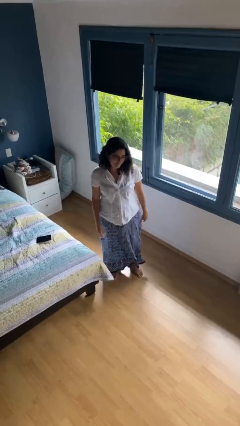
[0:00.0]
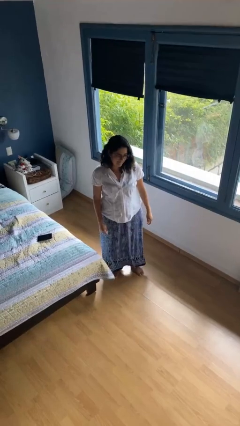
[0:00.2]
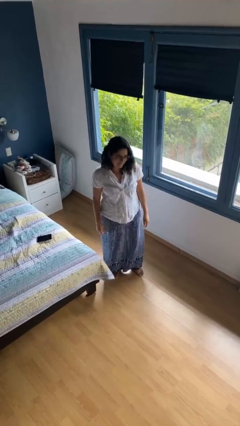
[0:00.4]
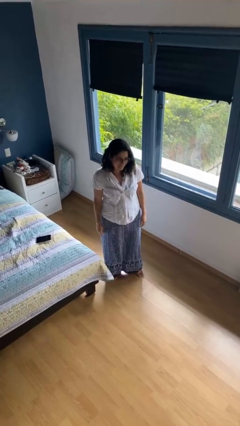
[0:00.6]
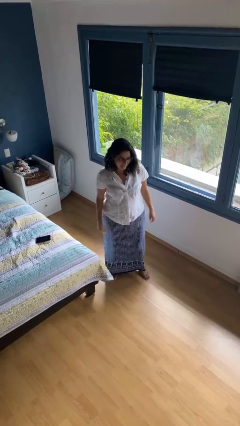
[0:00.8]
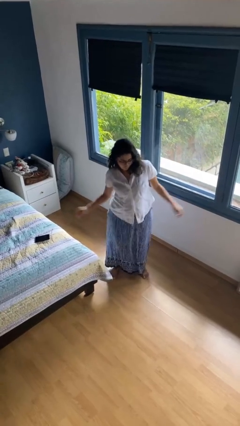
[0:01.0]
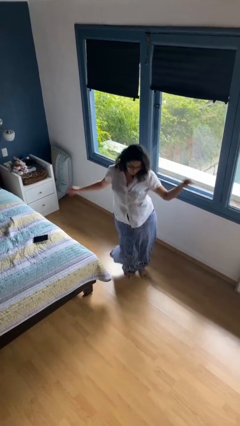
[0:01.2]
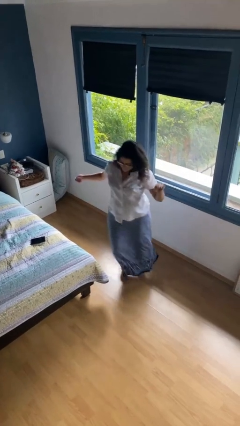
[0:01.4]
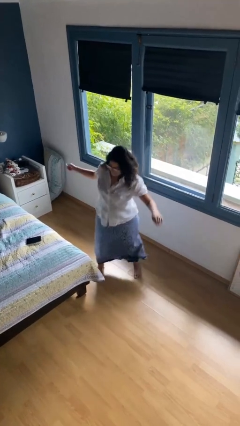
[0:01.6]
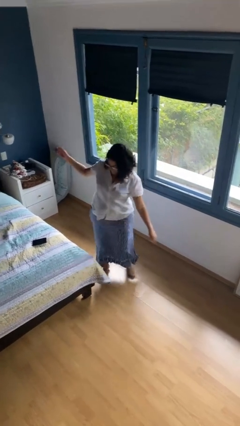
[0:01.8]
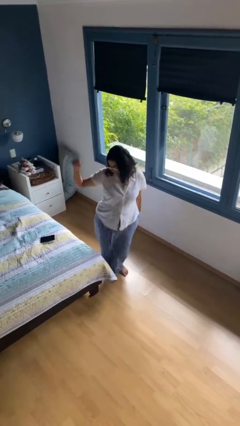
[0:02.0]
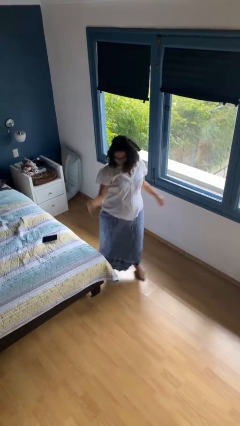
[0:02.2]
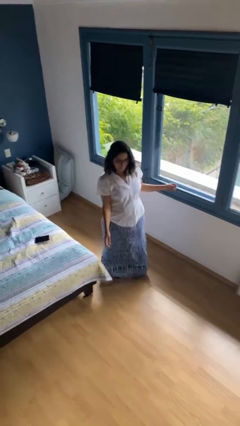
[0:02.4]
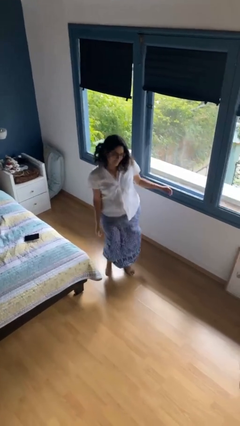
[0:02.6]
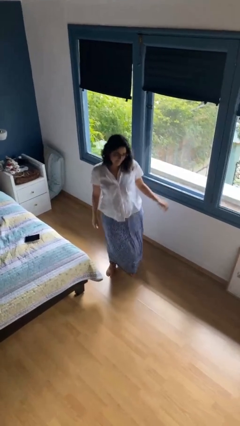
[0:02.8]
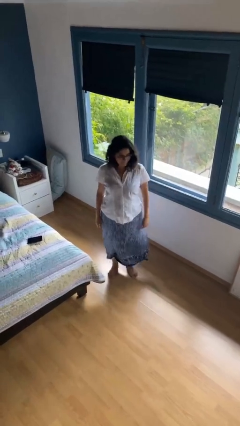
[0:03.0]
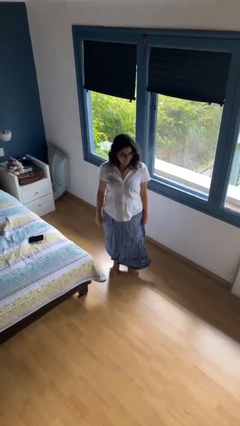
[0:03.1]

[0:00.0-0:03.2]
person dances in place

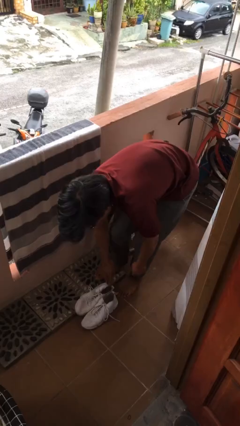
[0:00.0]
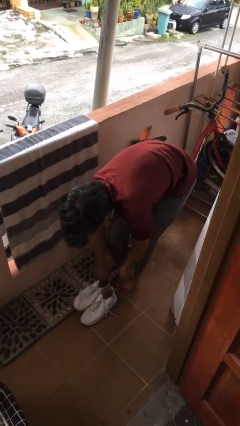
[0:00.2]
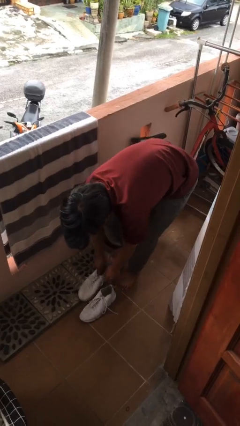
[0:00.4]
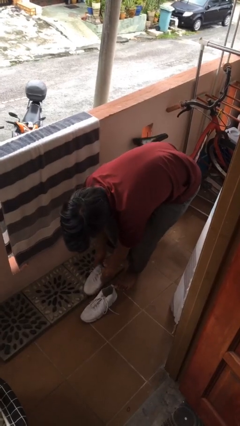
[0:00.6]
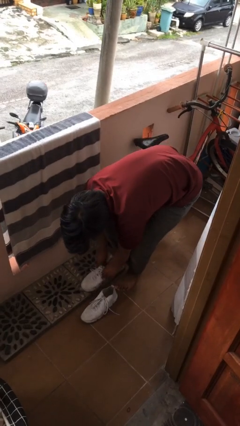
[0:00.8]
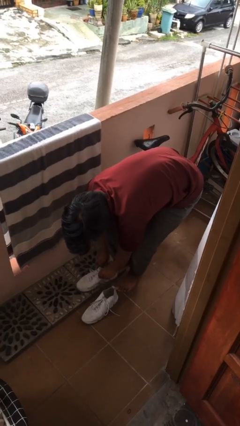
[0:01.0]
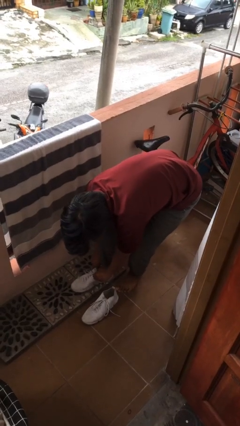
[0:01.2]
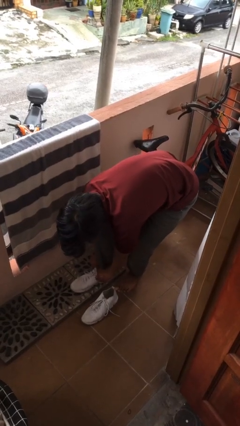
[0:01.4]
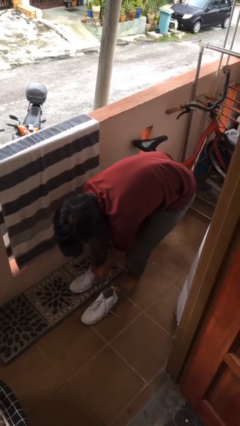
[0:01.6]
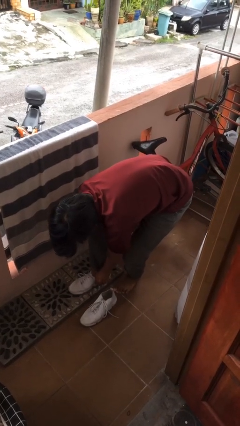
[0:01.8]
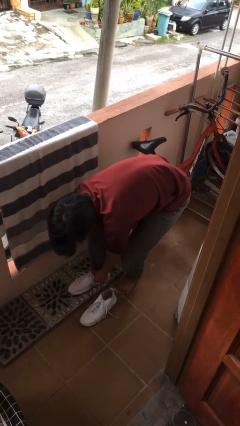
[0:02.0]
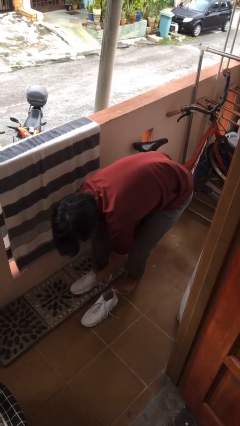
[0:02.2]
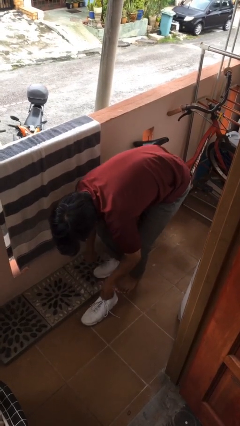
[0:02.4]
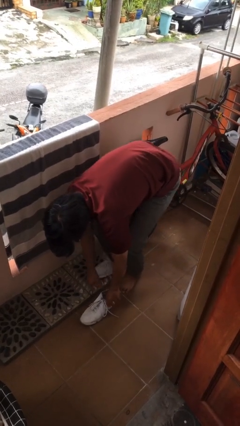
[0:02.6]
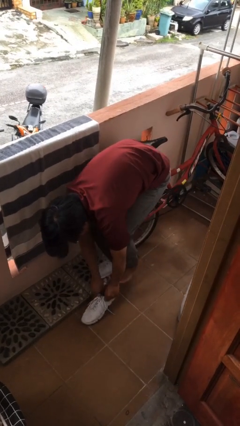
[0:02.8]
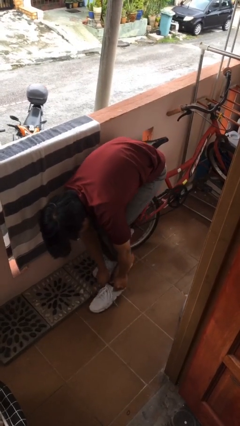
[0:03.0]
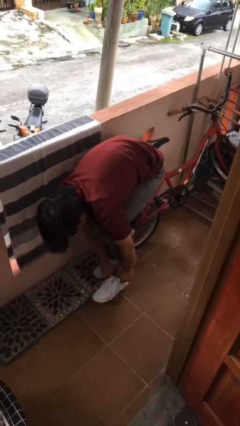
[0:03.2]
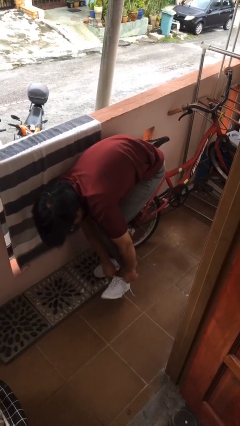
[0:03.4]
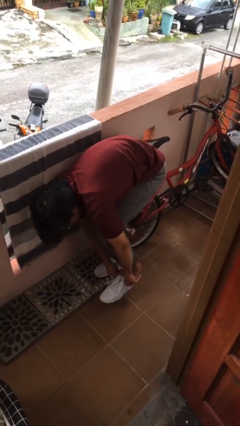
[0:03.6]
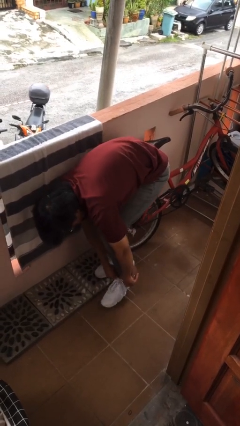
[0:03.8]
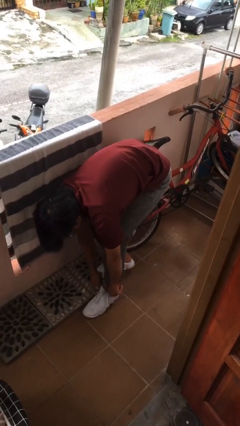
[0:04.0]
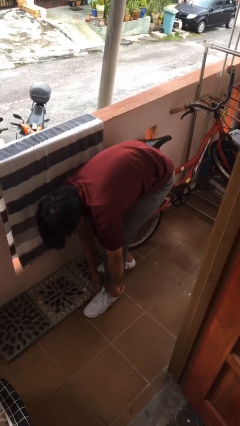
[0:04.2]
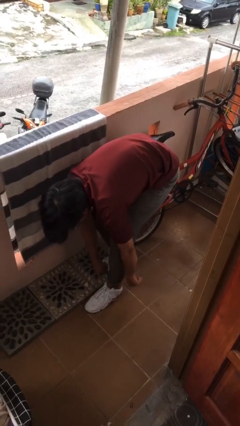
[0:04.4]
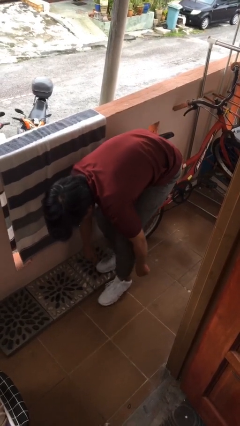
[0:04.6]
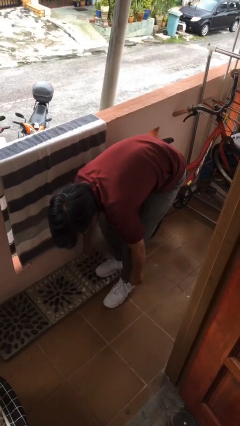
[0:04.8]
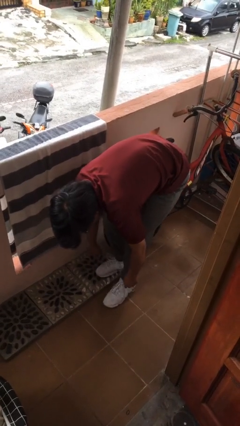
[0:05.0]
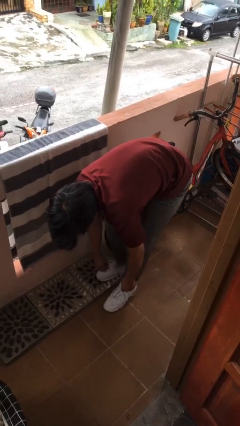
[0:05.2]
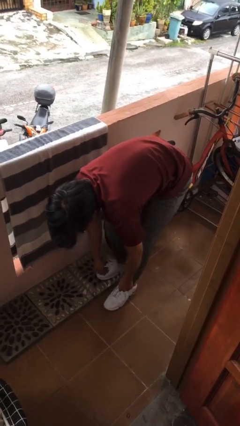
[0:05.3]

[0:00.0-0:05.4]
person puts on shoes

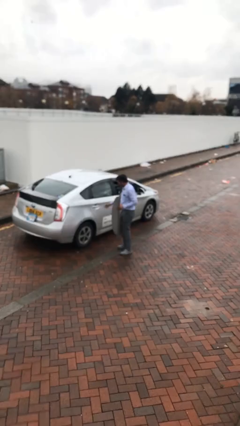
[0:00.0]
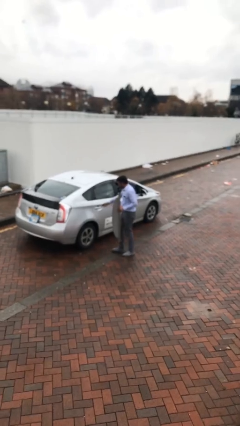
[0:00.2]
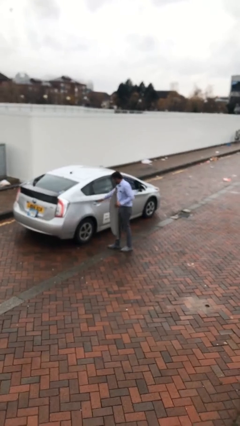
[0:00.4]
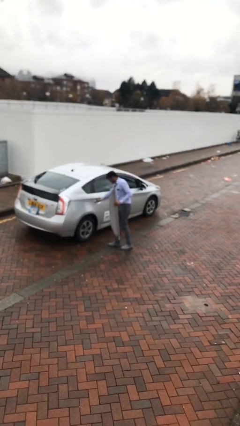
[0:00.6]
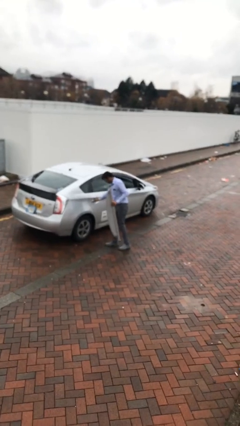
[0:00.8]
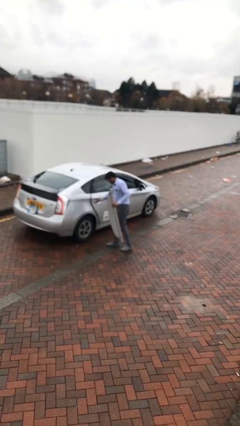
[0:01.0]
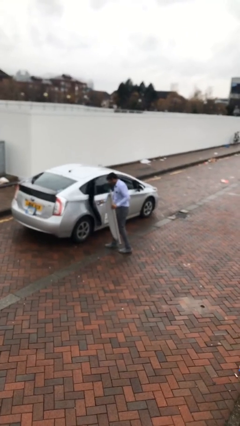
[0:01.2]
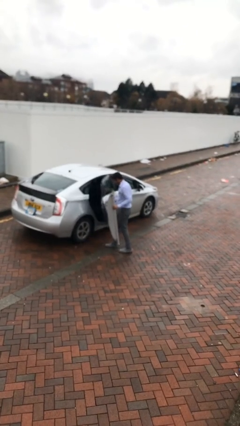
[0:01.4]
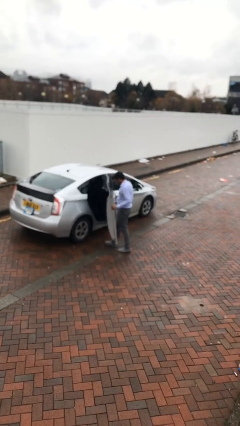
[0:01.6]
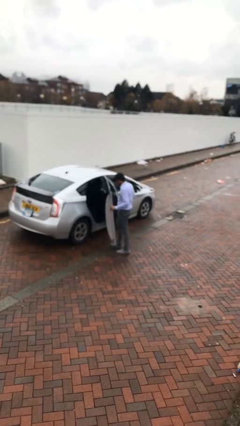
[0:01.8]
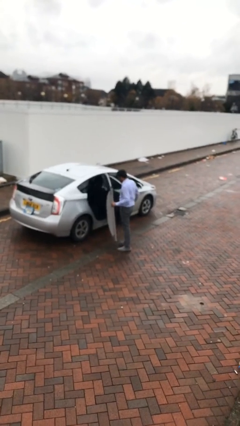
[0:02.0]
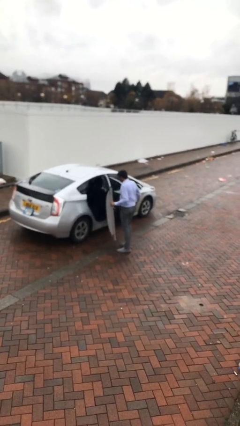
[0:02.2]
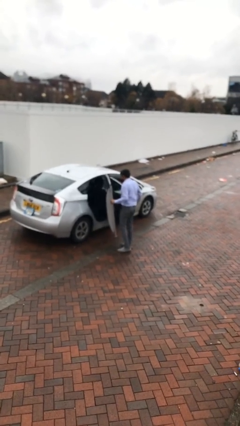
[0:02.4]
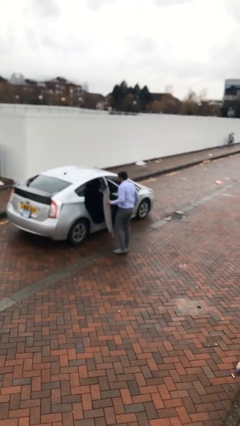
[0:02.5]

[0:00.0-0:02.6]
person opens car door

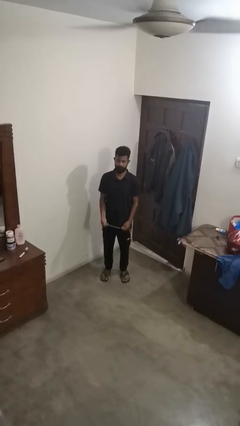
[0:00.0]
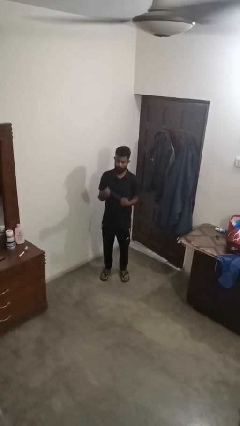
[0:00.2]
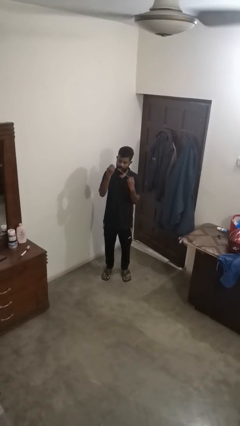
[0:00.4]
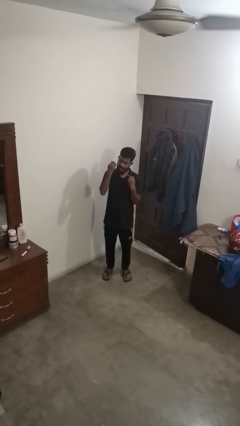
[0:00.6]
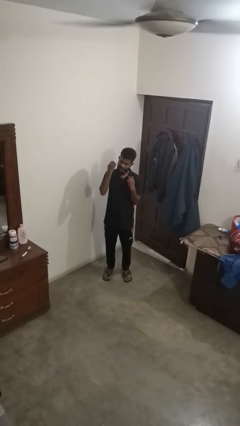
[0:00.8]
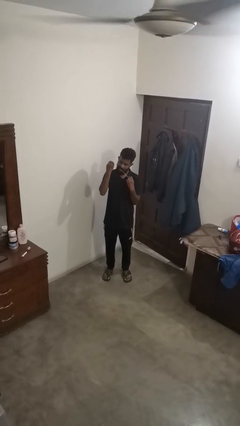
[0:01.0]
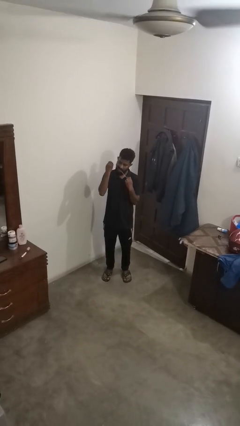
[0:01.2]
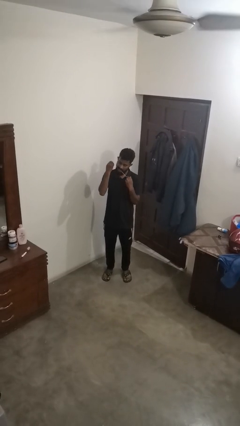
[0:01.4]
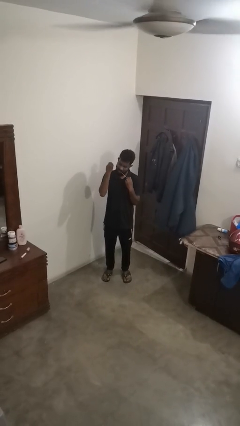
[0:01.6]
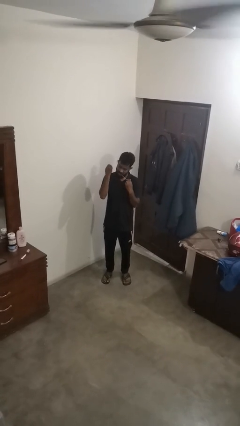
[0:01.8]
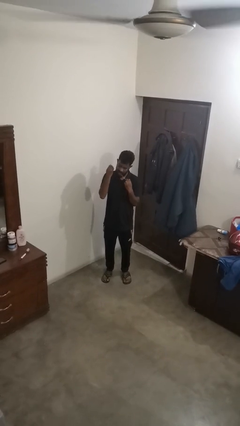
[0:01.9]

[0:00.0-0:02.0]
person flosses

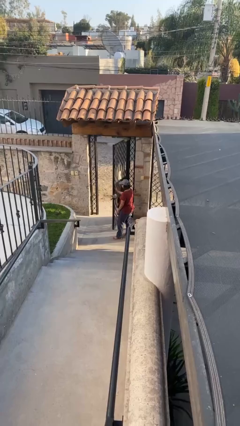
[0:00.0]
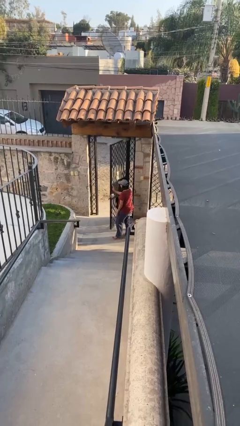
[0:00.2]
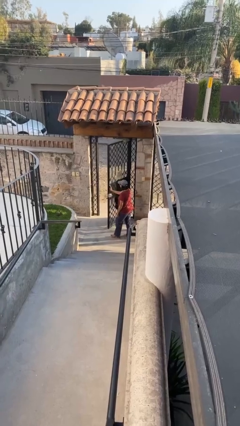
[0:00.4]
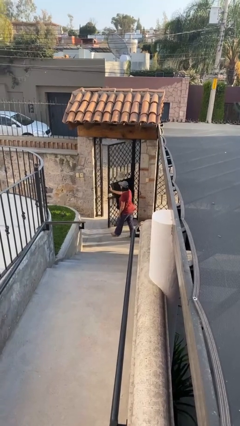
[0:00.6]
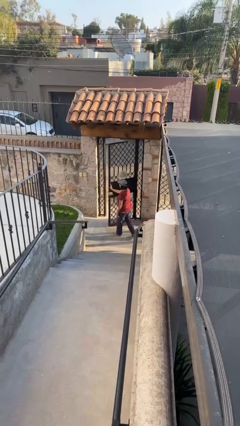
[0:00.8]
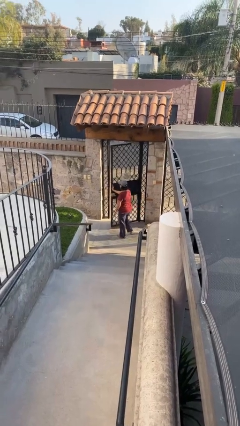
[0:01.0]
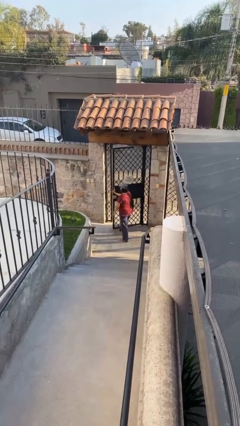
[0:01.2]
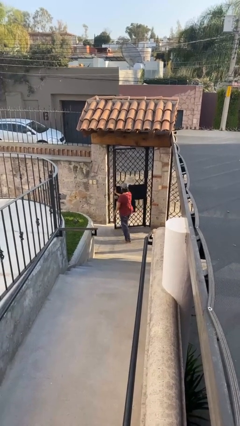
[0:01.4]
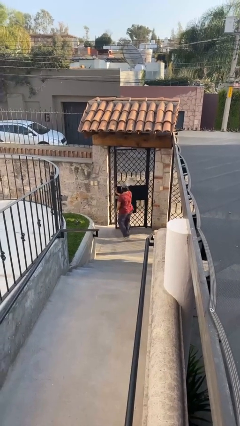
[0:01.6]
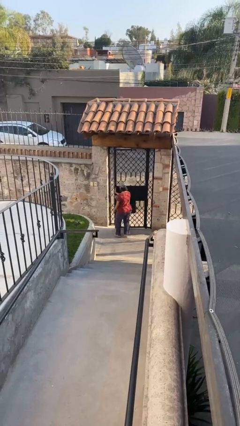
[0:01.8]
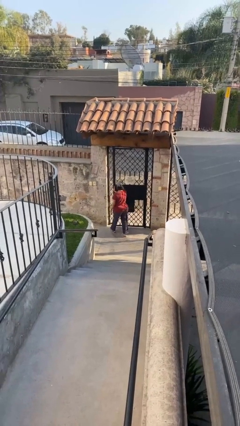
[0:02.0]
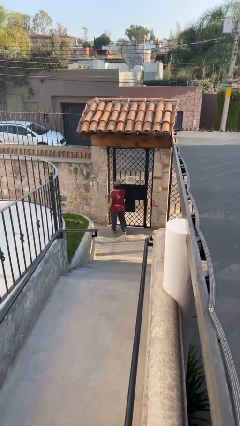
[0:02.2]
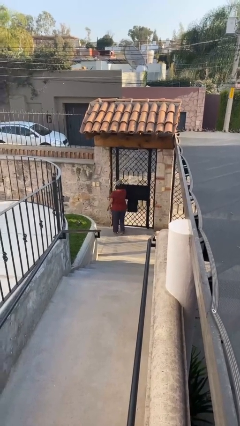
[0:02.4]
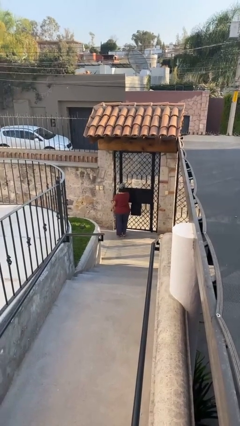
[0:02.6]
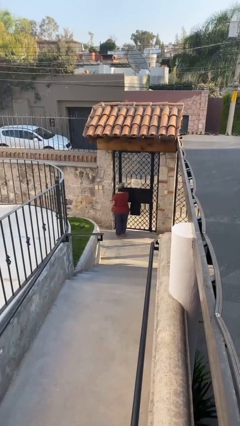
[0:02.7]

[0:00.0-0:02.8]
person closes facility door

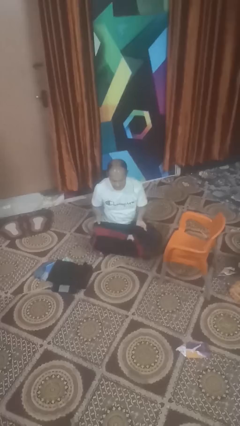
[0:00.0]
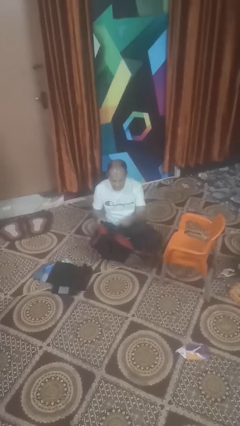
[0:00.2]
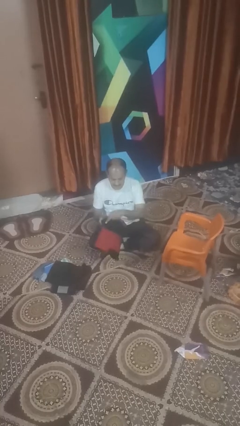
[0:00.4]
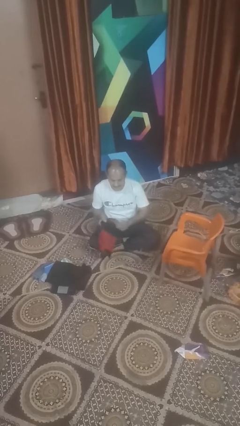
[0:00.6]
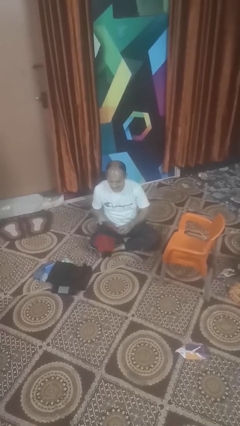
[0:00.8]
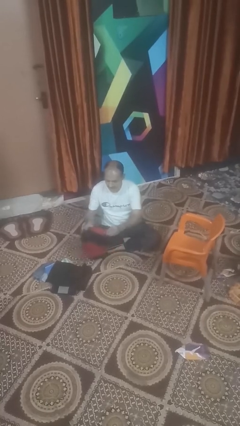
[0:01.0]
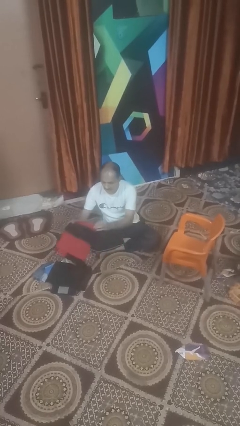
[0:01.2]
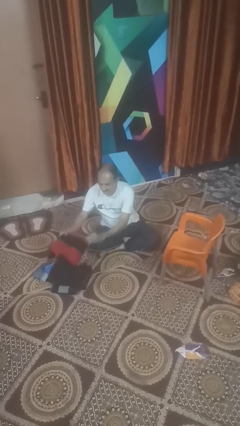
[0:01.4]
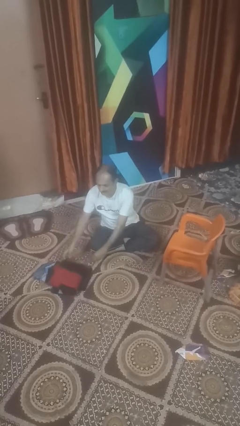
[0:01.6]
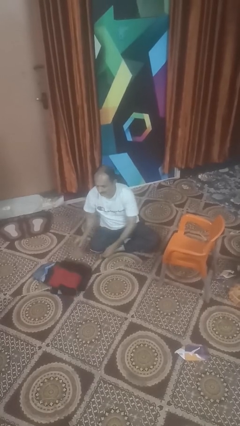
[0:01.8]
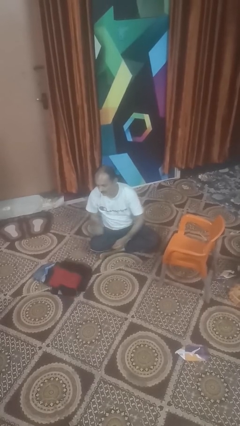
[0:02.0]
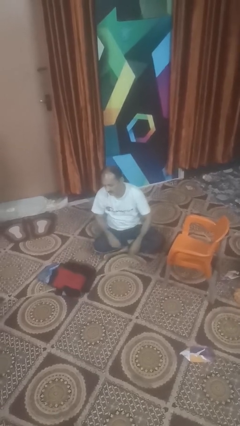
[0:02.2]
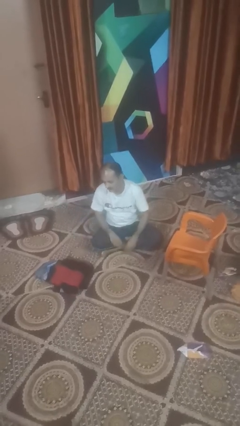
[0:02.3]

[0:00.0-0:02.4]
person folds shirt
